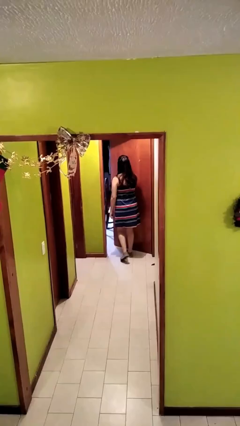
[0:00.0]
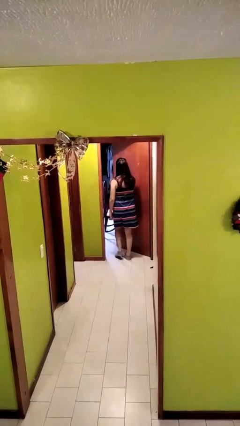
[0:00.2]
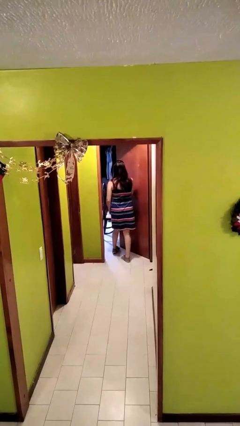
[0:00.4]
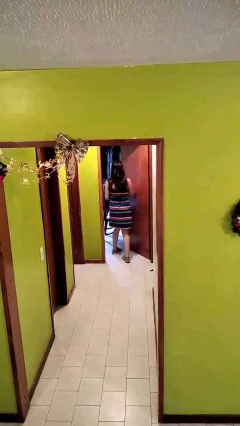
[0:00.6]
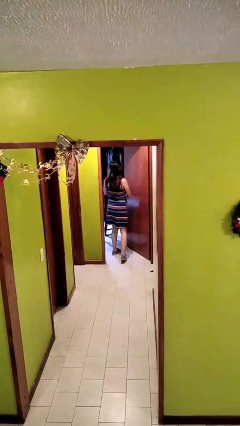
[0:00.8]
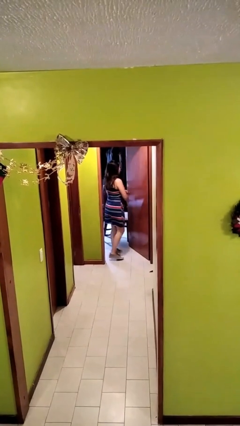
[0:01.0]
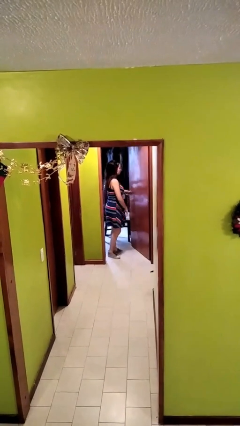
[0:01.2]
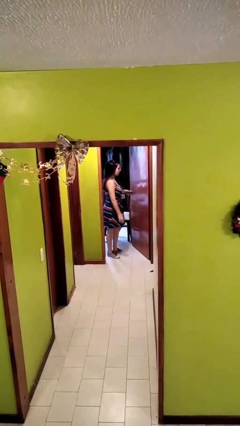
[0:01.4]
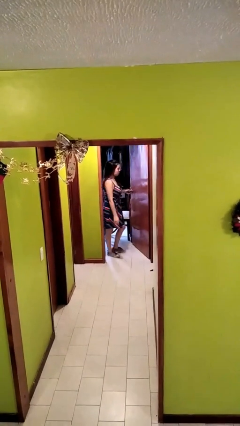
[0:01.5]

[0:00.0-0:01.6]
person opens facility door

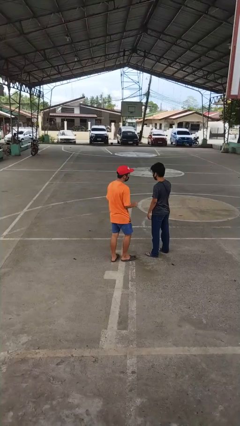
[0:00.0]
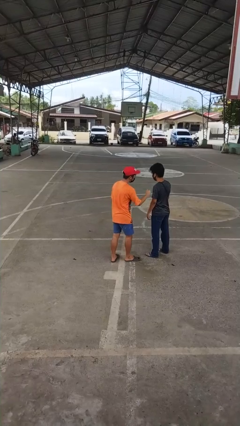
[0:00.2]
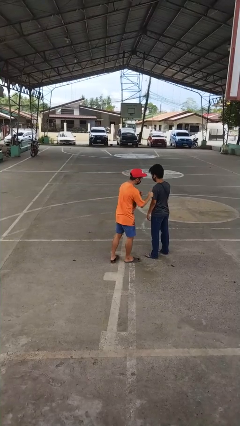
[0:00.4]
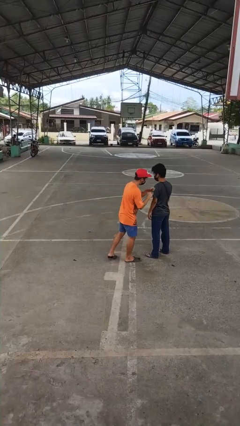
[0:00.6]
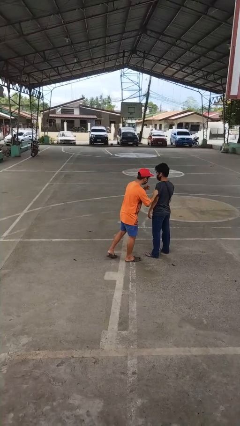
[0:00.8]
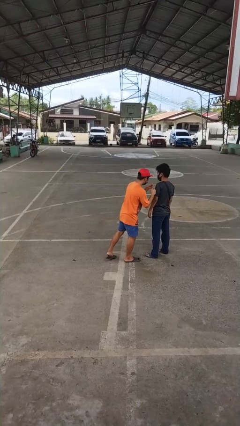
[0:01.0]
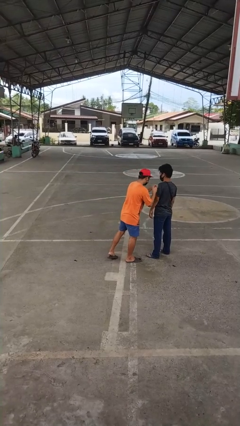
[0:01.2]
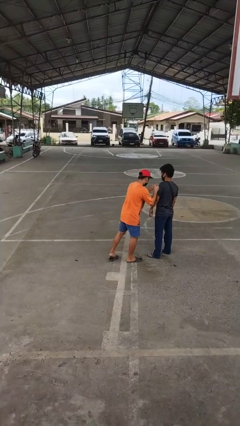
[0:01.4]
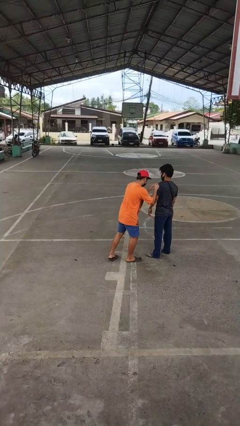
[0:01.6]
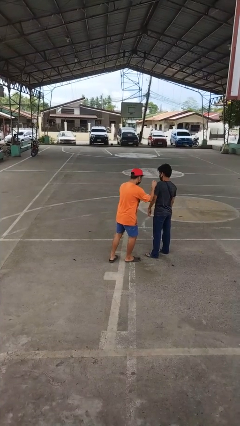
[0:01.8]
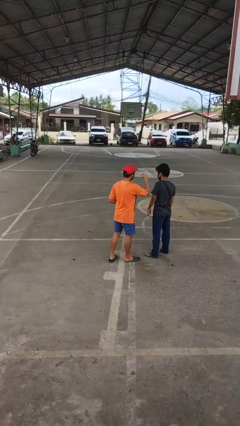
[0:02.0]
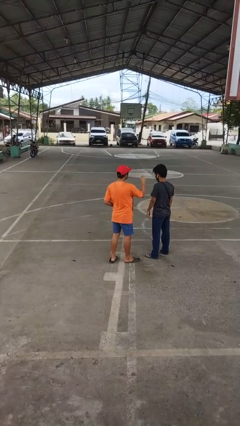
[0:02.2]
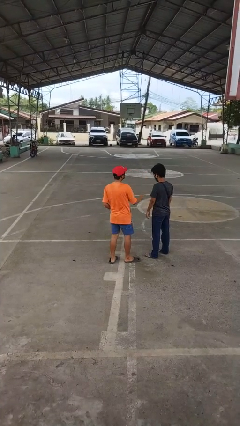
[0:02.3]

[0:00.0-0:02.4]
person pounds shoulders of person

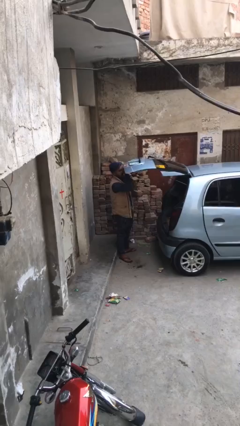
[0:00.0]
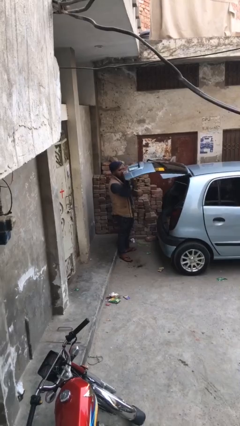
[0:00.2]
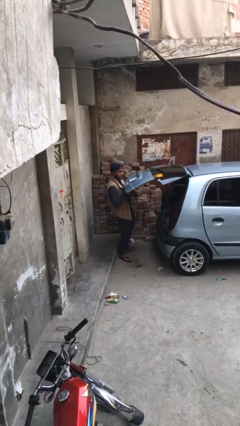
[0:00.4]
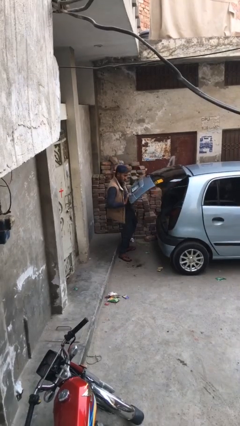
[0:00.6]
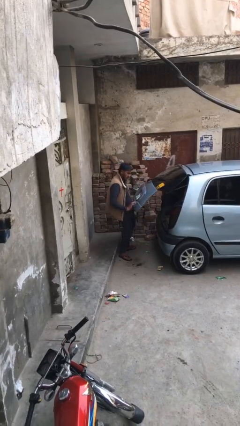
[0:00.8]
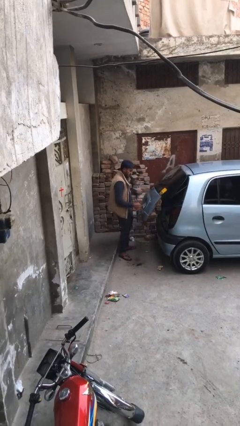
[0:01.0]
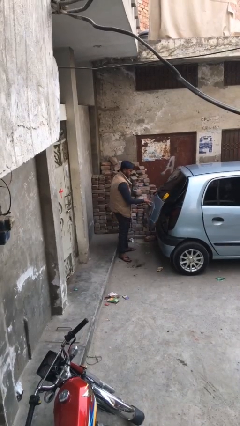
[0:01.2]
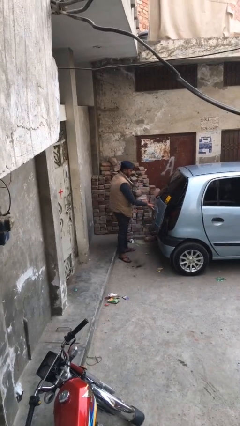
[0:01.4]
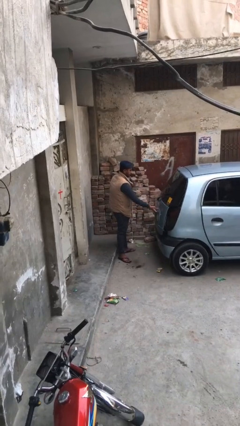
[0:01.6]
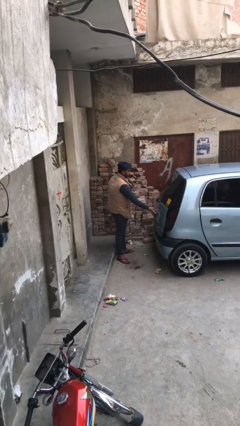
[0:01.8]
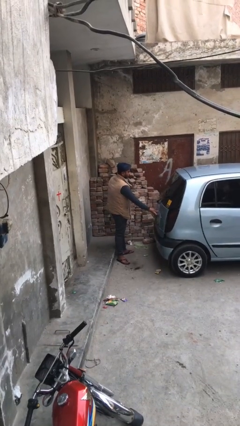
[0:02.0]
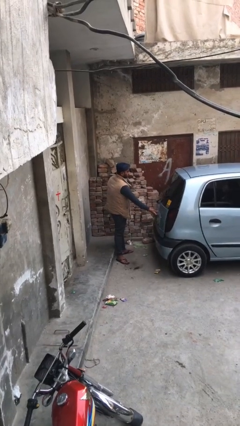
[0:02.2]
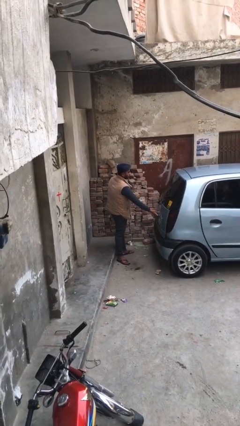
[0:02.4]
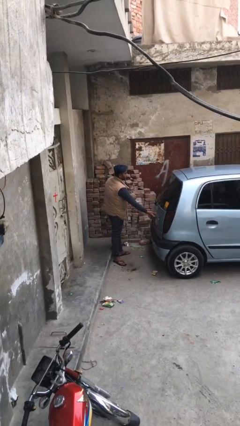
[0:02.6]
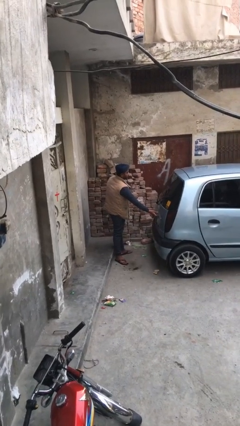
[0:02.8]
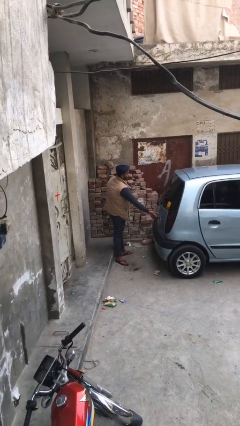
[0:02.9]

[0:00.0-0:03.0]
person closes car trunk

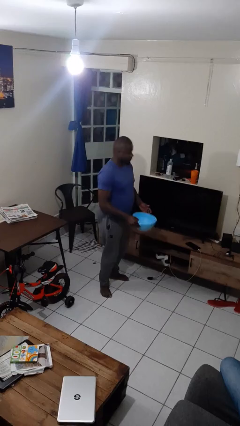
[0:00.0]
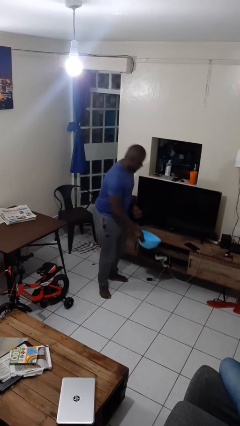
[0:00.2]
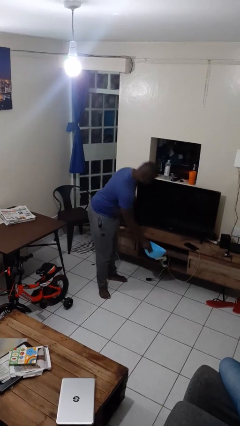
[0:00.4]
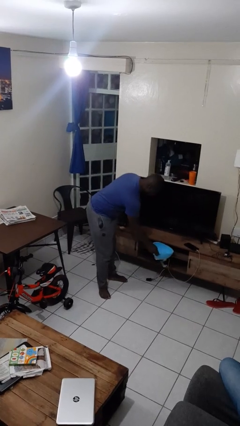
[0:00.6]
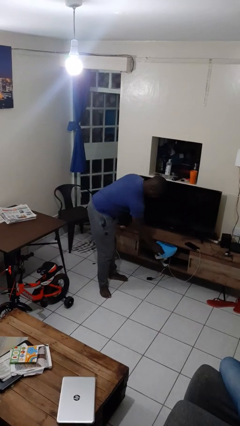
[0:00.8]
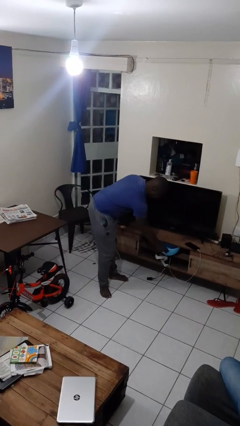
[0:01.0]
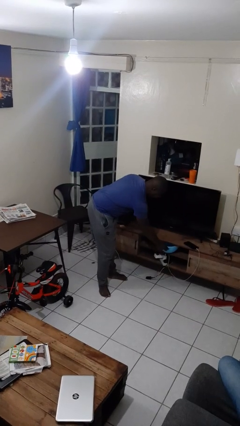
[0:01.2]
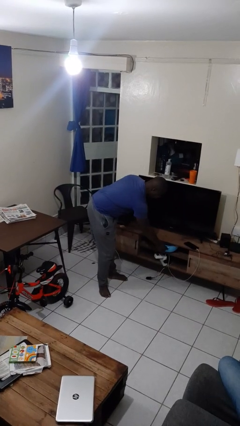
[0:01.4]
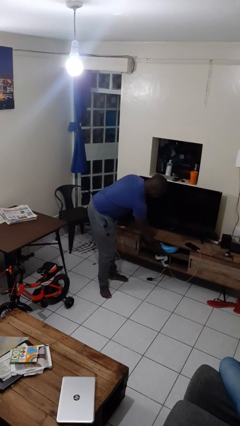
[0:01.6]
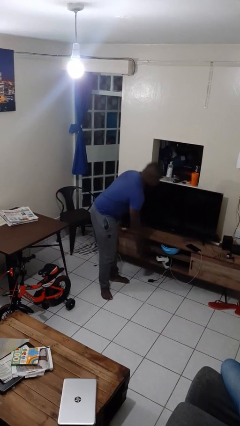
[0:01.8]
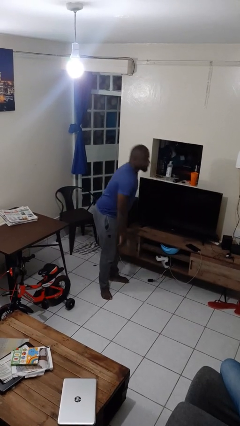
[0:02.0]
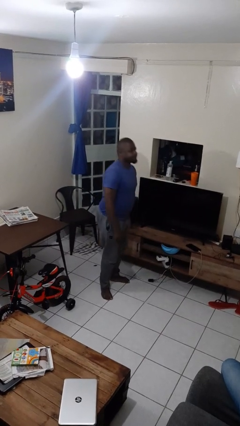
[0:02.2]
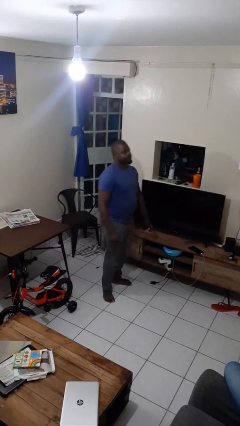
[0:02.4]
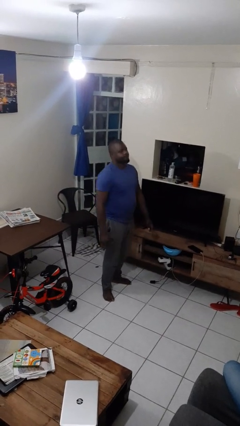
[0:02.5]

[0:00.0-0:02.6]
person puts down object into cabinet

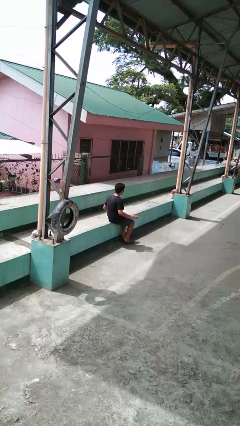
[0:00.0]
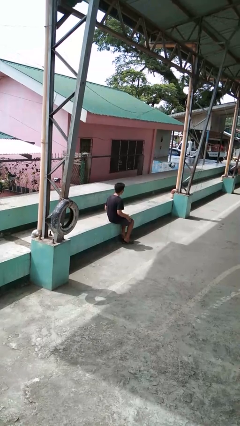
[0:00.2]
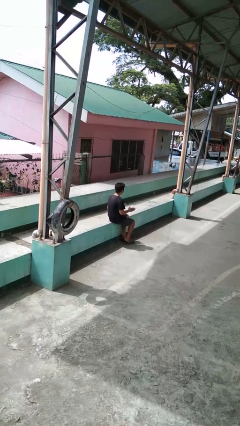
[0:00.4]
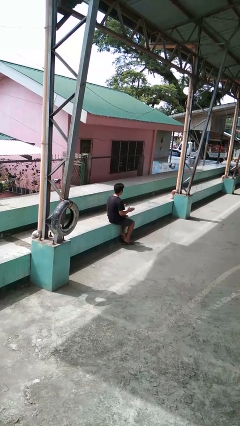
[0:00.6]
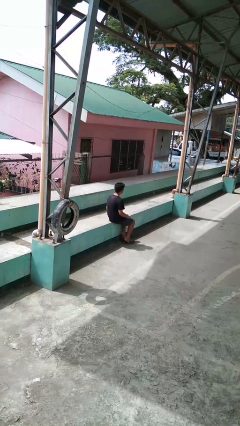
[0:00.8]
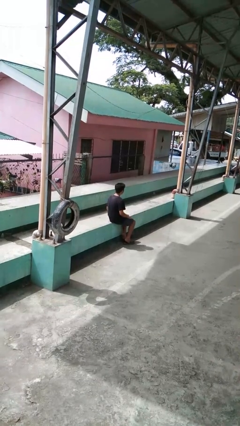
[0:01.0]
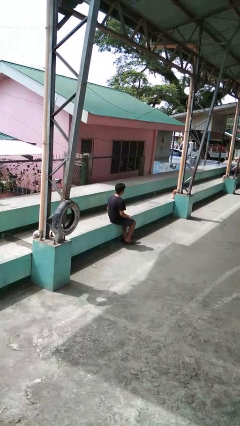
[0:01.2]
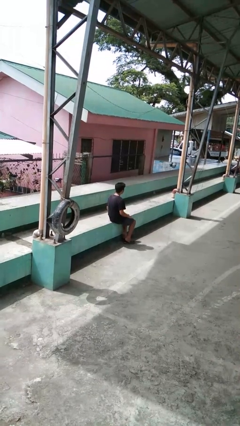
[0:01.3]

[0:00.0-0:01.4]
person slaps hands on thighs

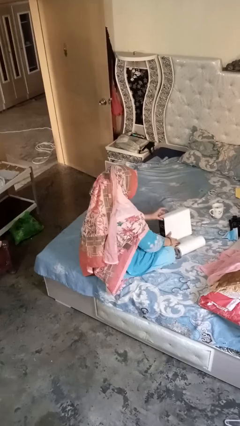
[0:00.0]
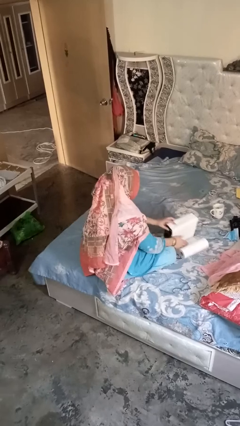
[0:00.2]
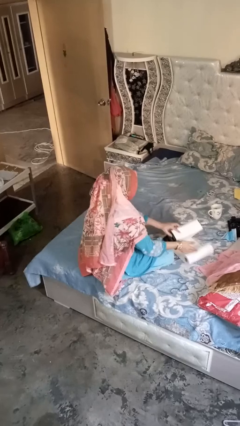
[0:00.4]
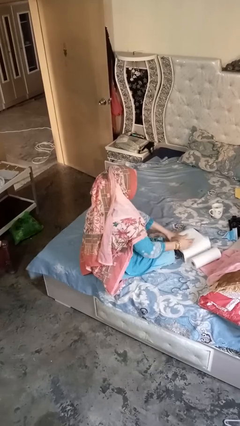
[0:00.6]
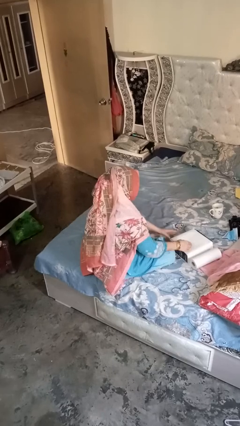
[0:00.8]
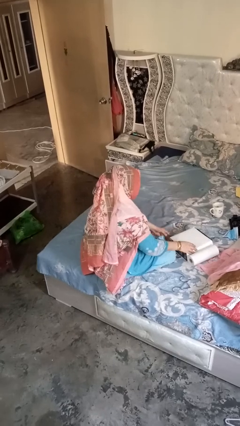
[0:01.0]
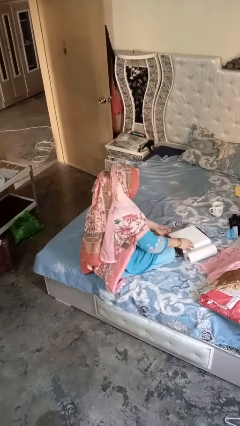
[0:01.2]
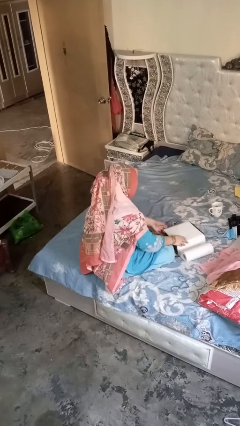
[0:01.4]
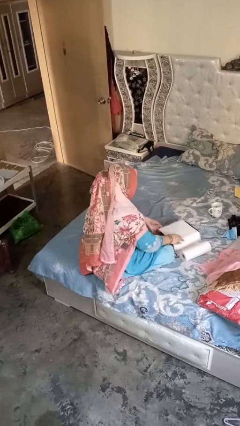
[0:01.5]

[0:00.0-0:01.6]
person wraps box

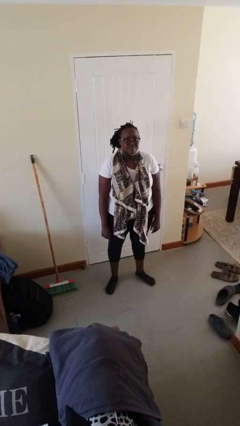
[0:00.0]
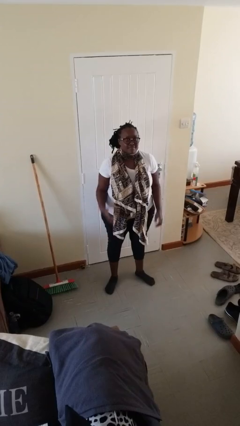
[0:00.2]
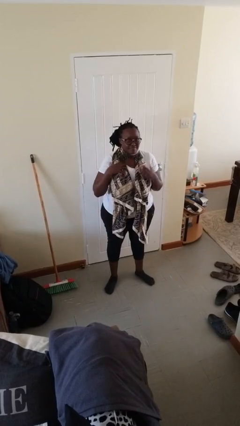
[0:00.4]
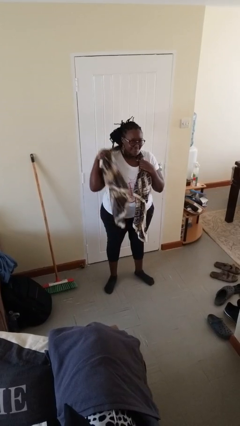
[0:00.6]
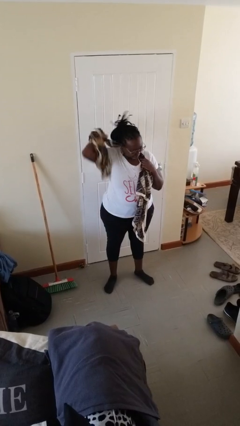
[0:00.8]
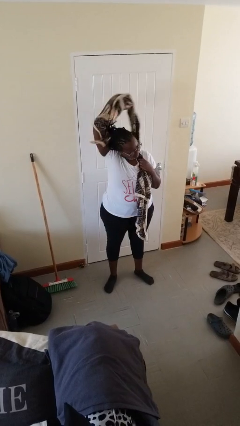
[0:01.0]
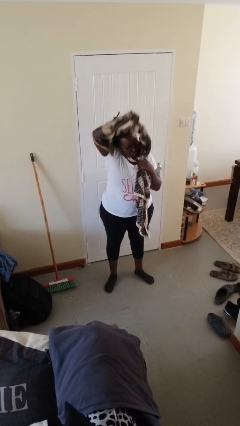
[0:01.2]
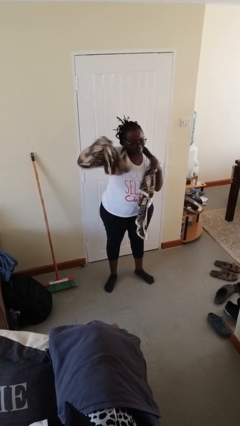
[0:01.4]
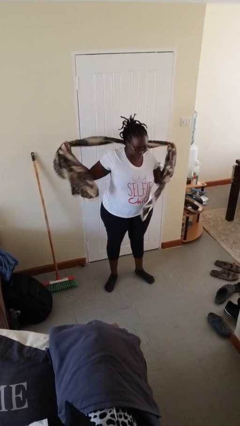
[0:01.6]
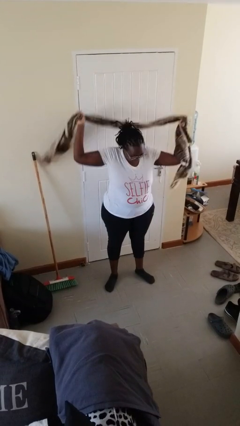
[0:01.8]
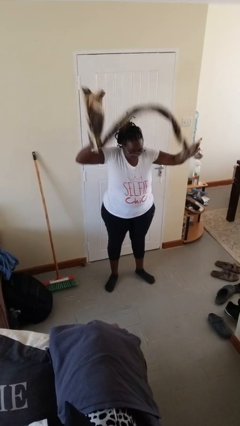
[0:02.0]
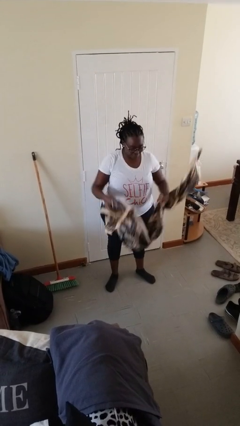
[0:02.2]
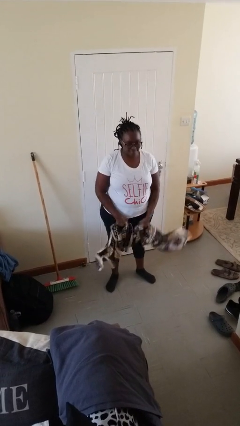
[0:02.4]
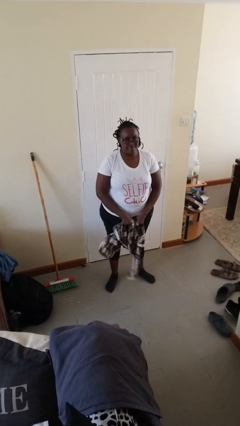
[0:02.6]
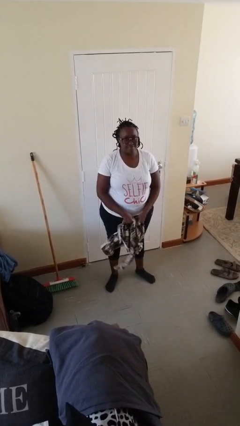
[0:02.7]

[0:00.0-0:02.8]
person takes off scarf

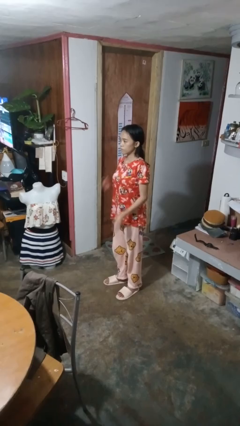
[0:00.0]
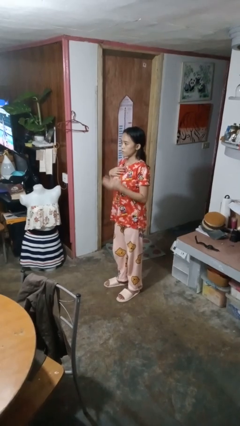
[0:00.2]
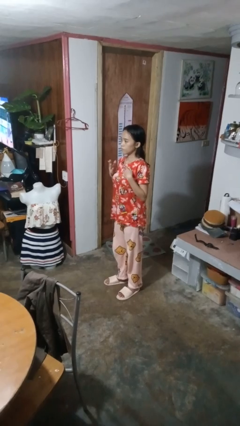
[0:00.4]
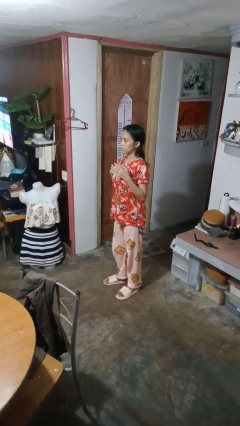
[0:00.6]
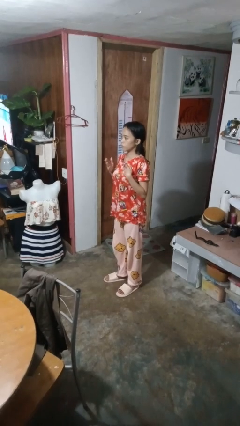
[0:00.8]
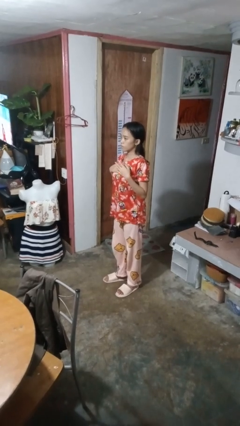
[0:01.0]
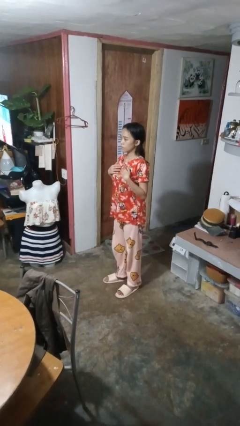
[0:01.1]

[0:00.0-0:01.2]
person drums on chest

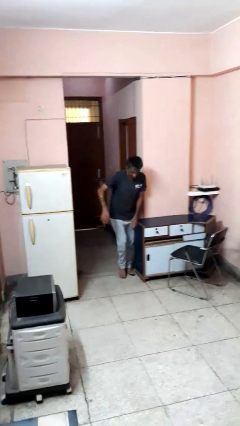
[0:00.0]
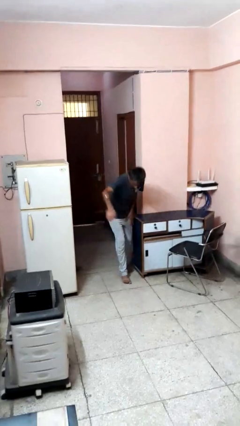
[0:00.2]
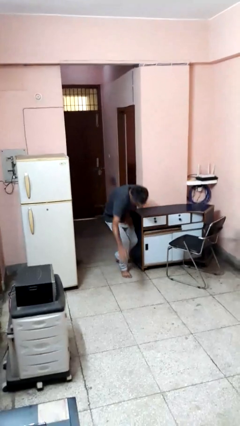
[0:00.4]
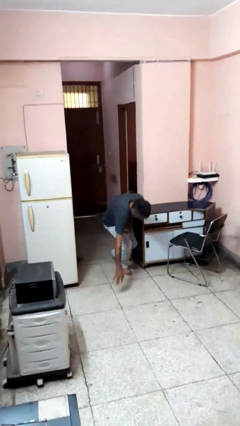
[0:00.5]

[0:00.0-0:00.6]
person trips on object on floor
